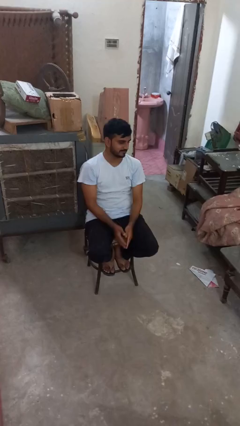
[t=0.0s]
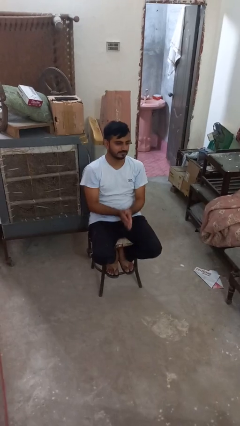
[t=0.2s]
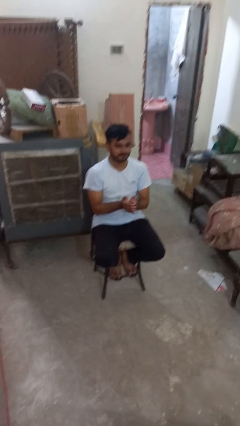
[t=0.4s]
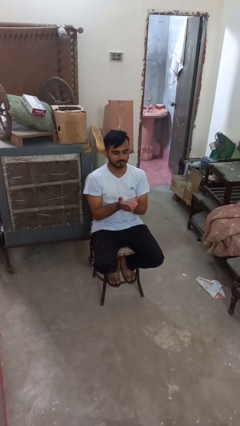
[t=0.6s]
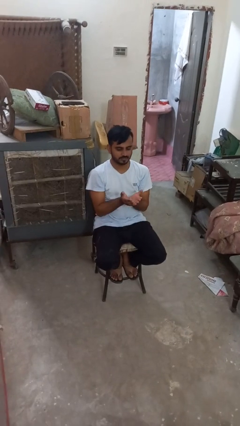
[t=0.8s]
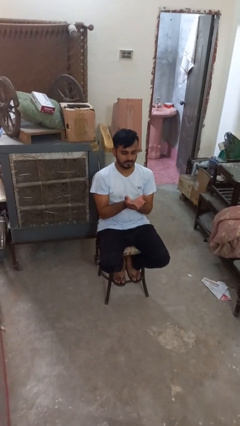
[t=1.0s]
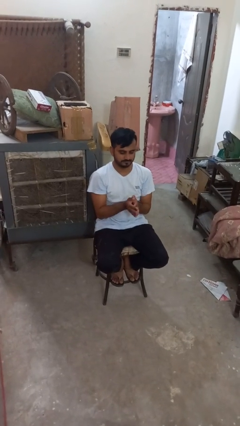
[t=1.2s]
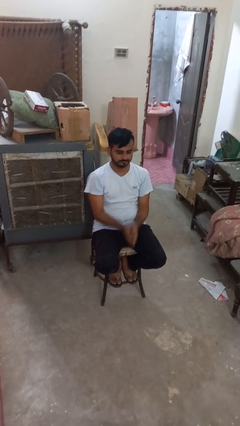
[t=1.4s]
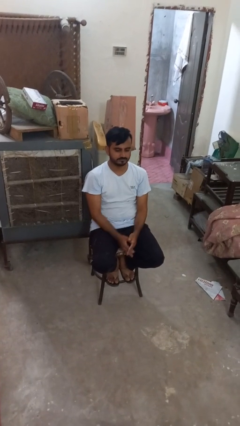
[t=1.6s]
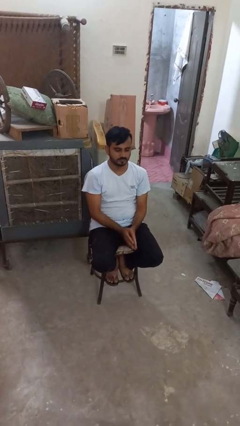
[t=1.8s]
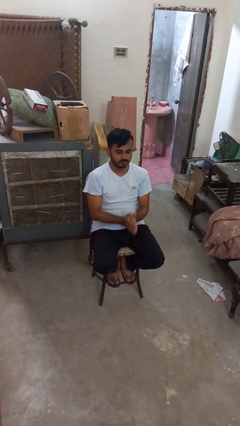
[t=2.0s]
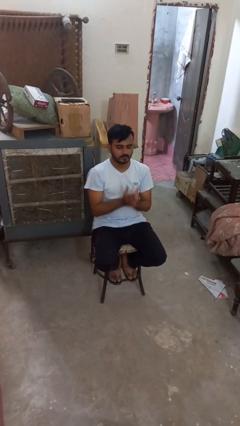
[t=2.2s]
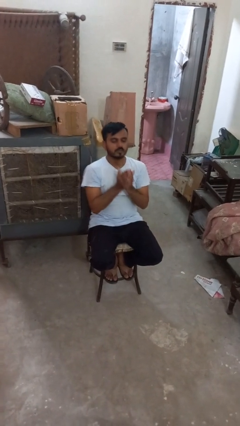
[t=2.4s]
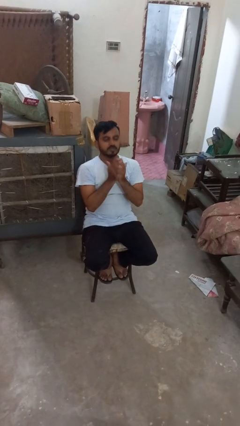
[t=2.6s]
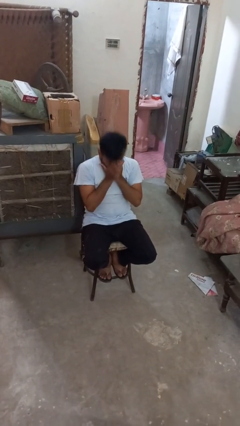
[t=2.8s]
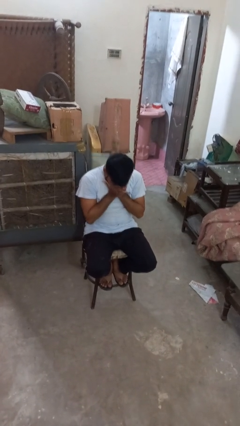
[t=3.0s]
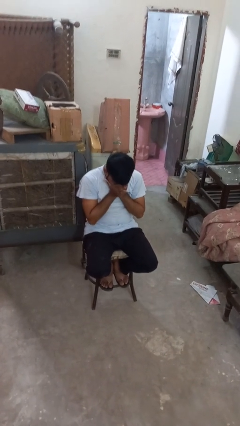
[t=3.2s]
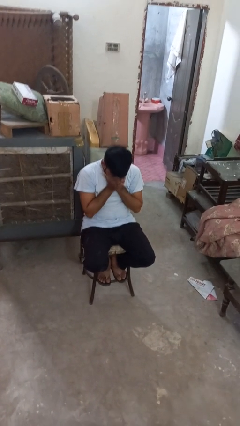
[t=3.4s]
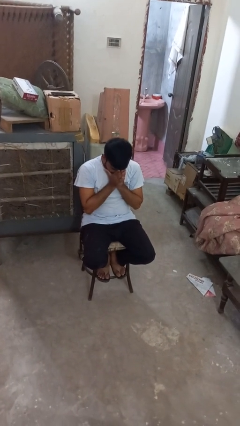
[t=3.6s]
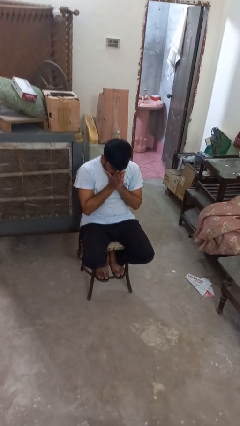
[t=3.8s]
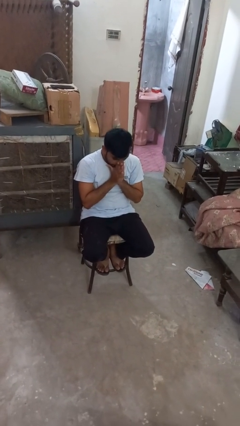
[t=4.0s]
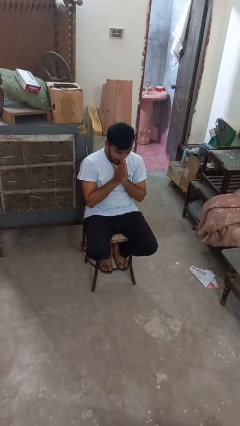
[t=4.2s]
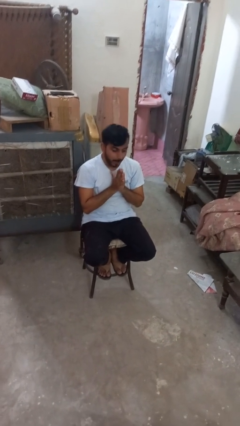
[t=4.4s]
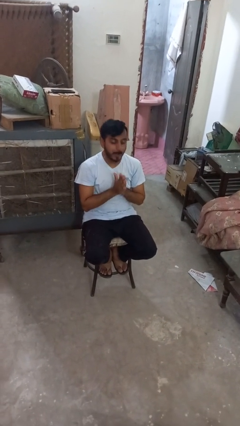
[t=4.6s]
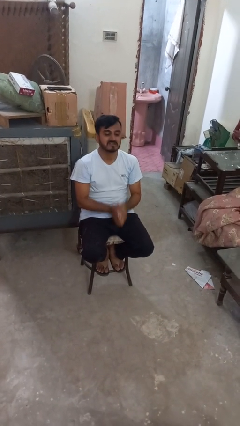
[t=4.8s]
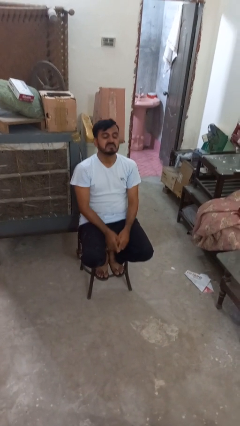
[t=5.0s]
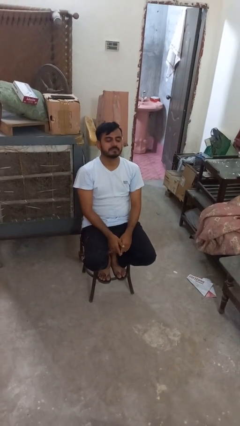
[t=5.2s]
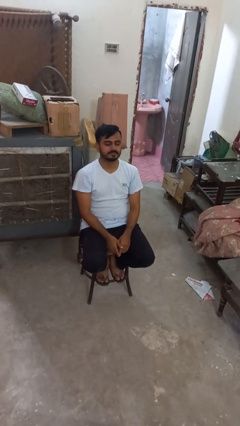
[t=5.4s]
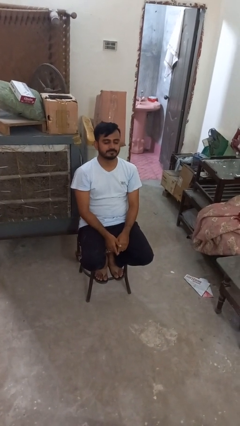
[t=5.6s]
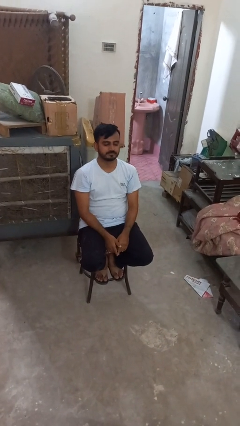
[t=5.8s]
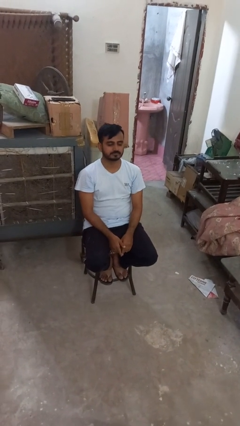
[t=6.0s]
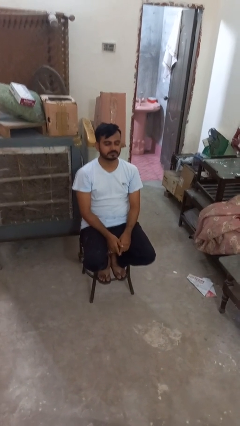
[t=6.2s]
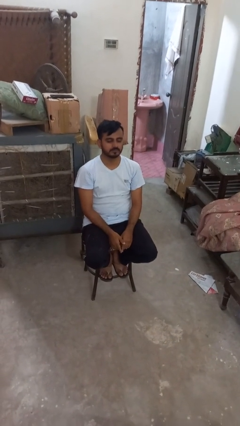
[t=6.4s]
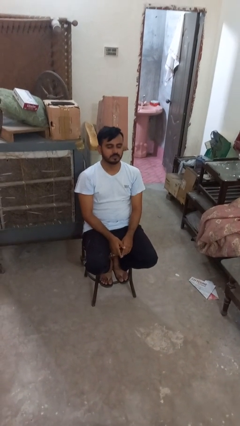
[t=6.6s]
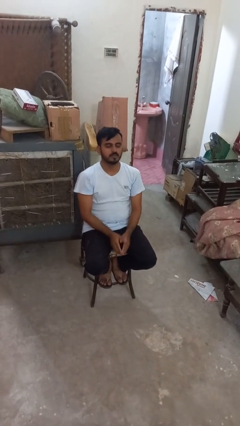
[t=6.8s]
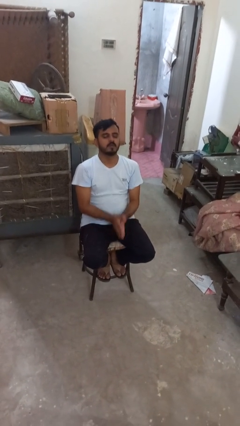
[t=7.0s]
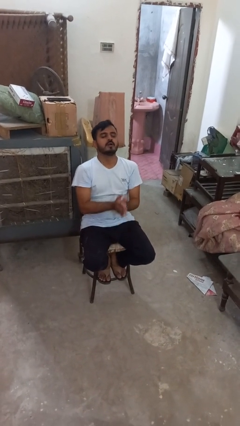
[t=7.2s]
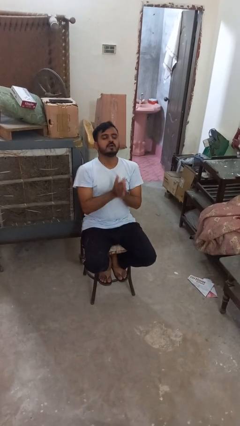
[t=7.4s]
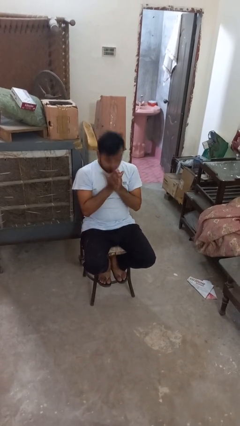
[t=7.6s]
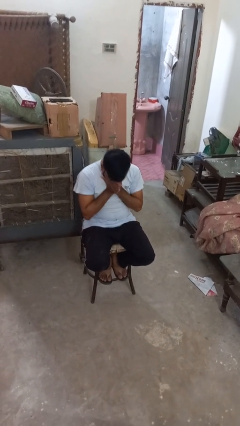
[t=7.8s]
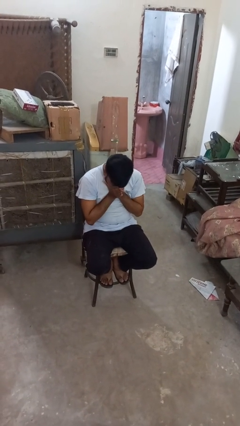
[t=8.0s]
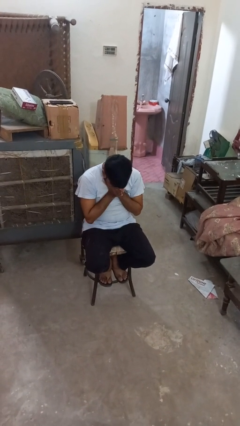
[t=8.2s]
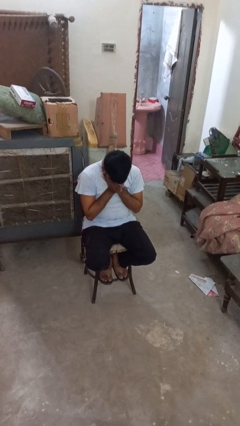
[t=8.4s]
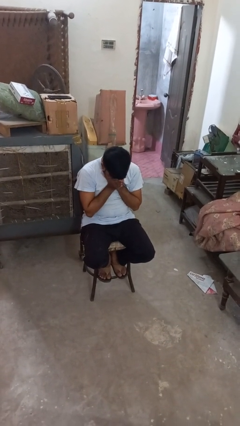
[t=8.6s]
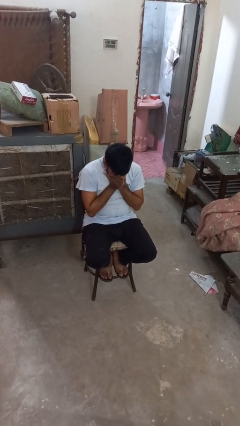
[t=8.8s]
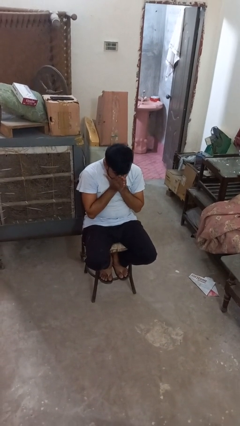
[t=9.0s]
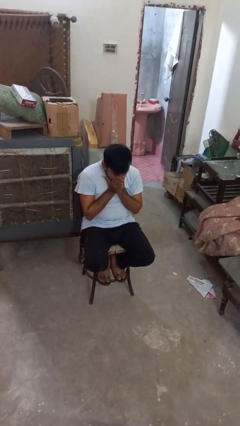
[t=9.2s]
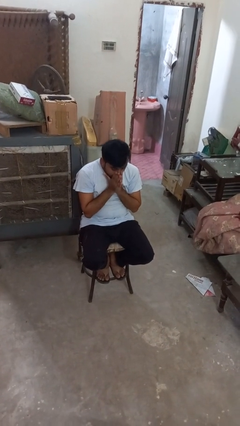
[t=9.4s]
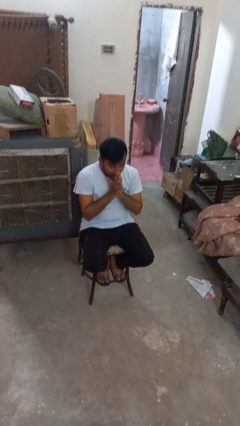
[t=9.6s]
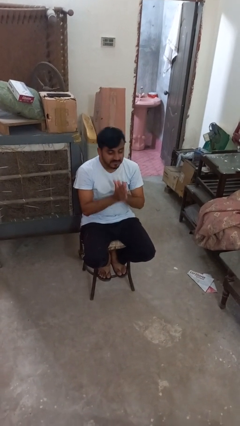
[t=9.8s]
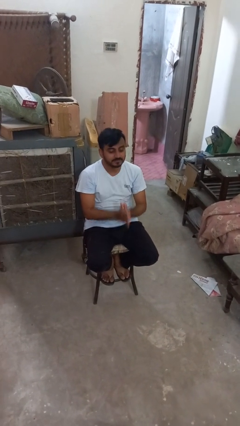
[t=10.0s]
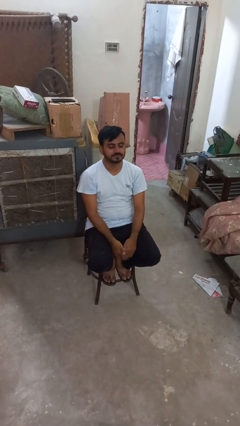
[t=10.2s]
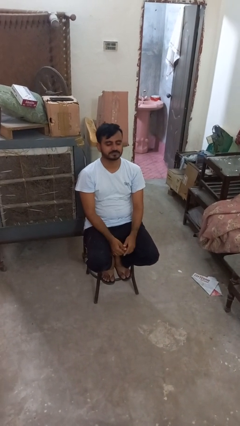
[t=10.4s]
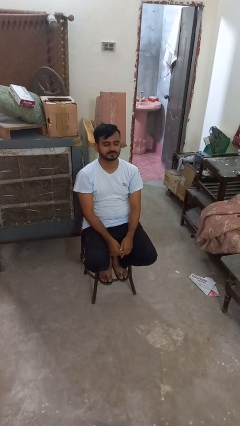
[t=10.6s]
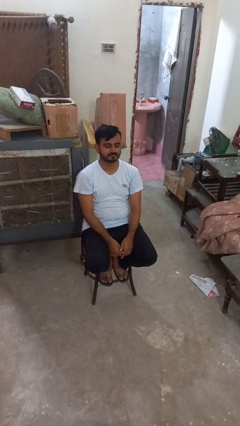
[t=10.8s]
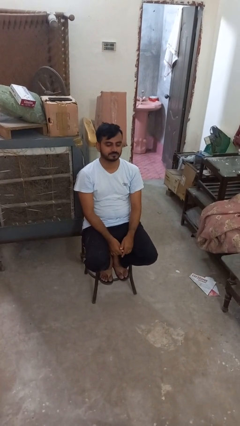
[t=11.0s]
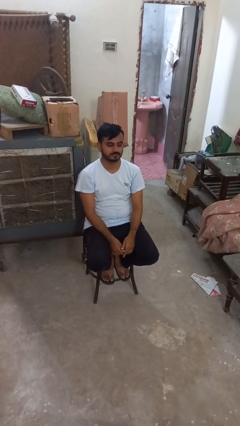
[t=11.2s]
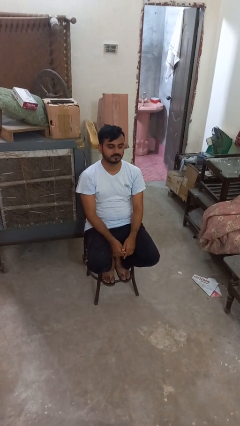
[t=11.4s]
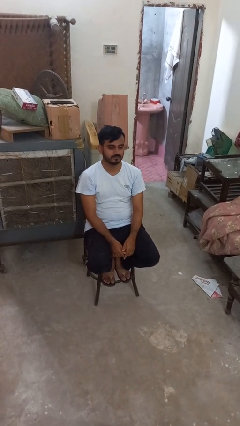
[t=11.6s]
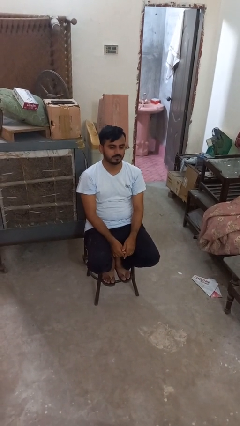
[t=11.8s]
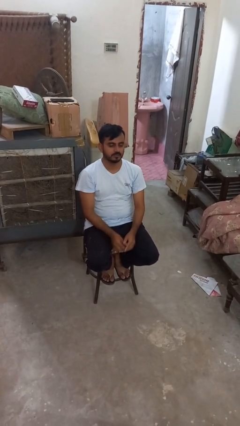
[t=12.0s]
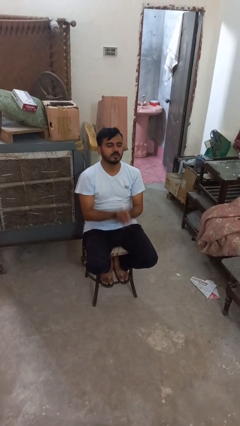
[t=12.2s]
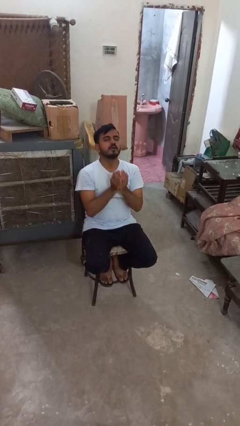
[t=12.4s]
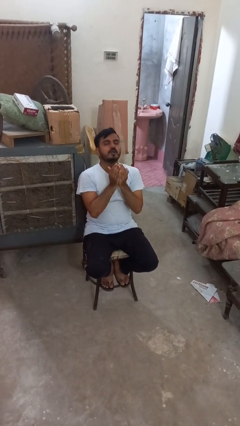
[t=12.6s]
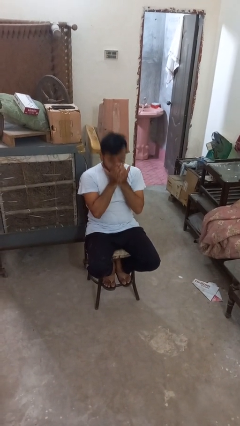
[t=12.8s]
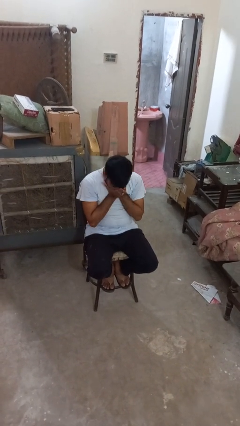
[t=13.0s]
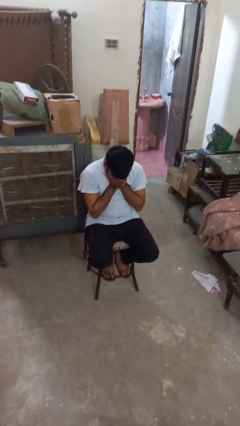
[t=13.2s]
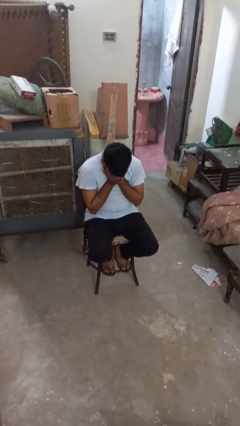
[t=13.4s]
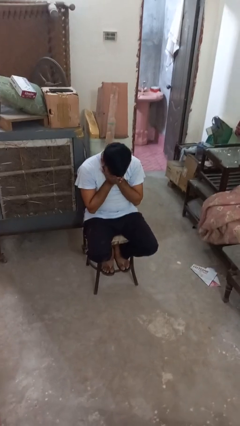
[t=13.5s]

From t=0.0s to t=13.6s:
person sneezes into hand

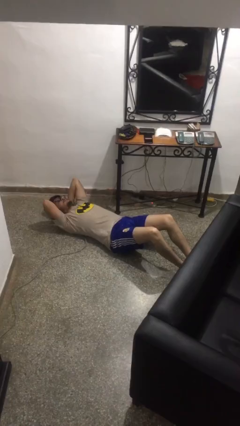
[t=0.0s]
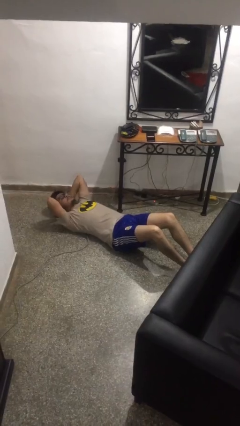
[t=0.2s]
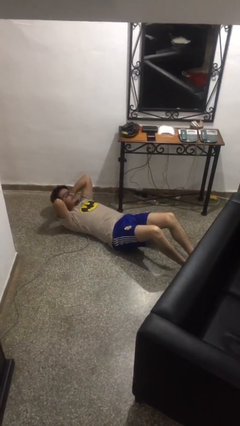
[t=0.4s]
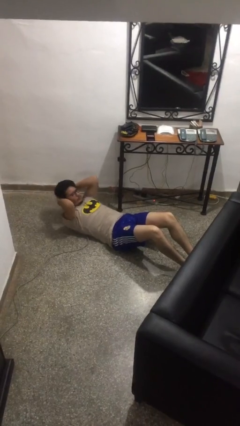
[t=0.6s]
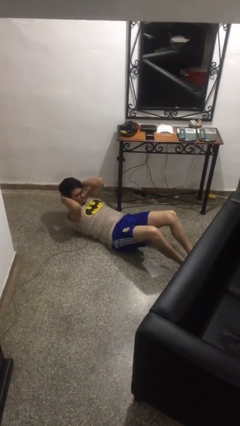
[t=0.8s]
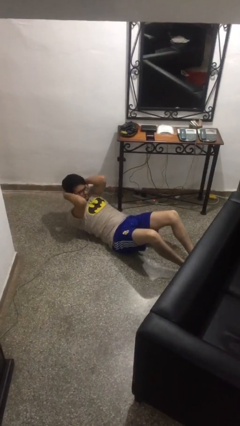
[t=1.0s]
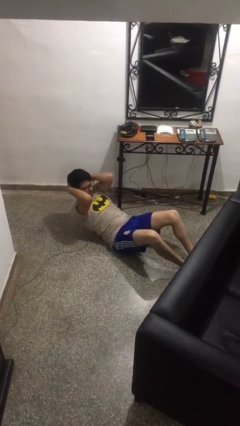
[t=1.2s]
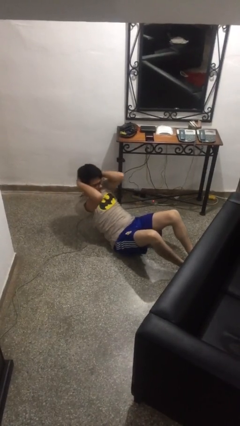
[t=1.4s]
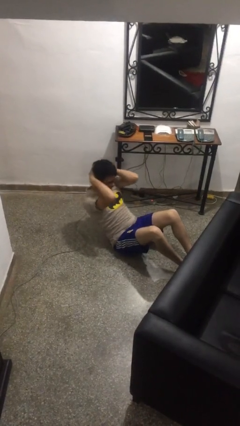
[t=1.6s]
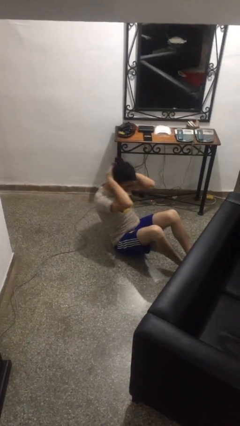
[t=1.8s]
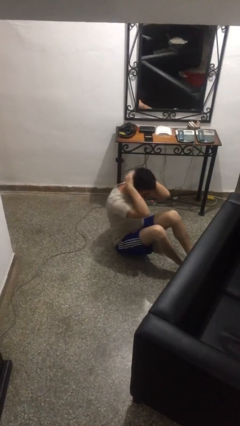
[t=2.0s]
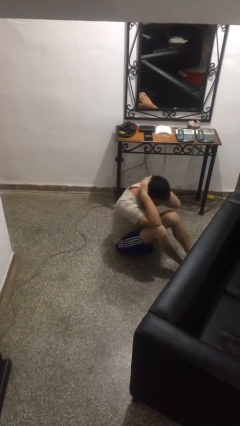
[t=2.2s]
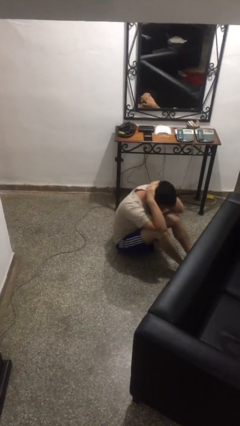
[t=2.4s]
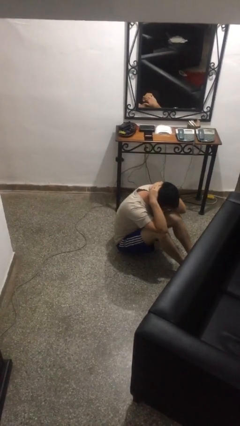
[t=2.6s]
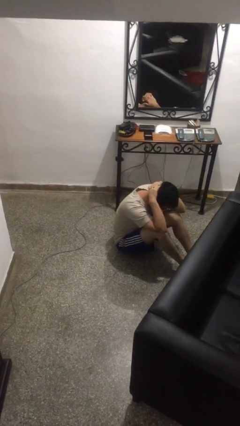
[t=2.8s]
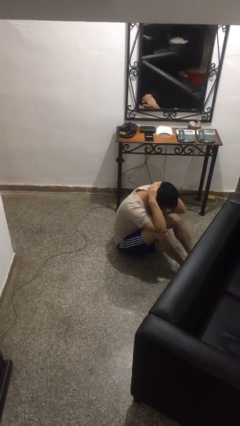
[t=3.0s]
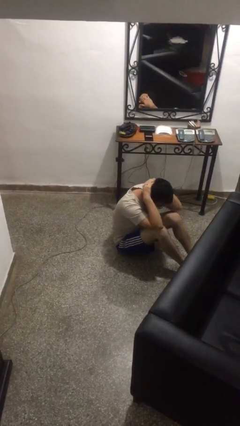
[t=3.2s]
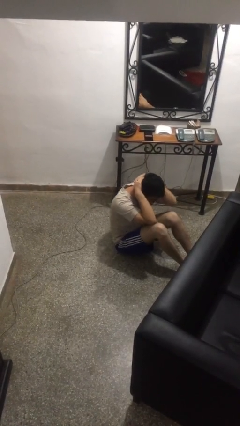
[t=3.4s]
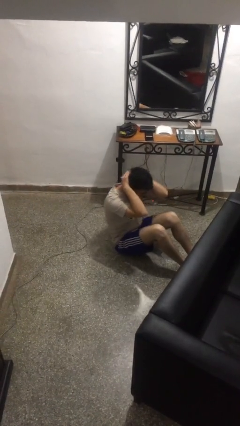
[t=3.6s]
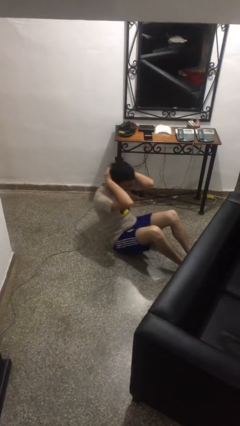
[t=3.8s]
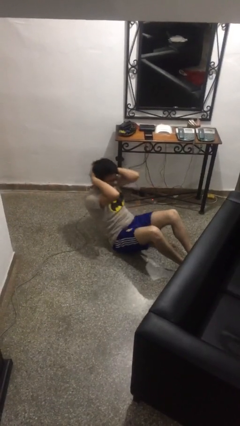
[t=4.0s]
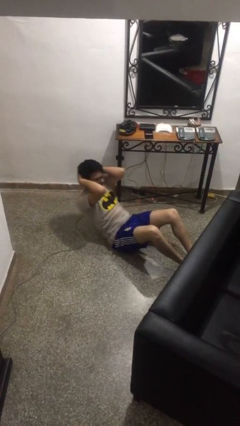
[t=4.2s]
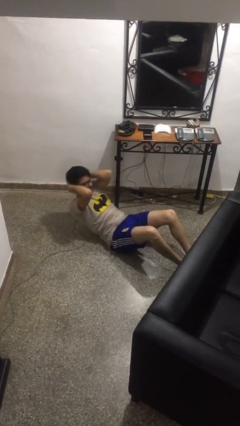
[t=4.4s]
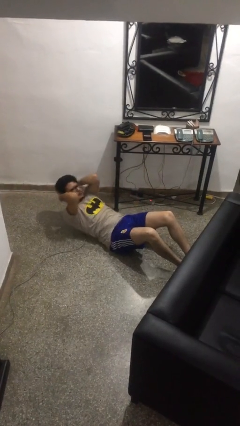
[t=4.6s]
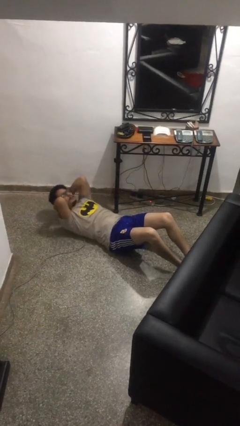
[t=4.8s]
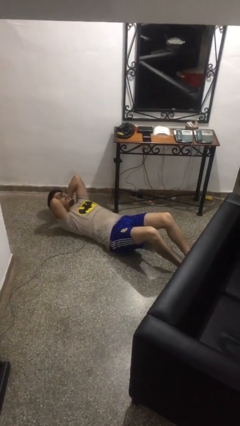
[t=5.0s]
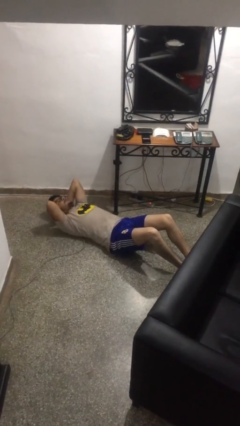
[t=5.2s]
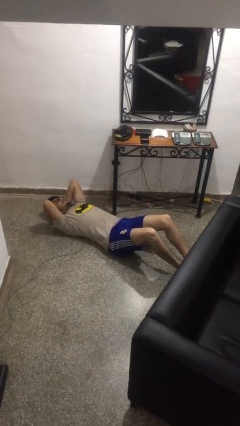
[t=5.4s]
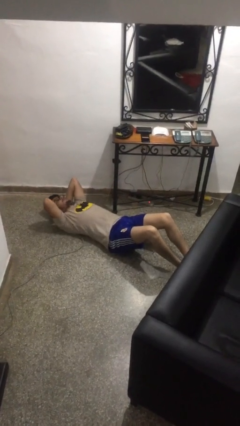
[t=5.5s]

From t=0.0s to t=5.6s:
person exercises with situp
